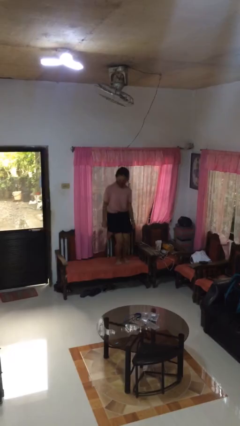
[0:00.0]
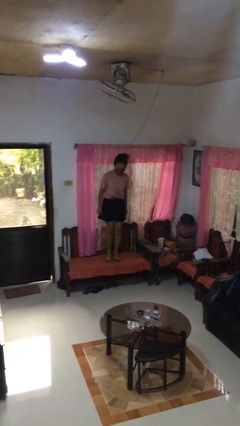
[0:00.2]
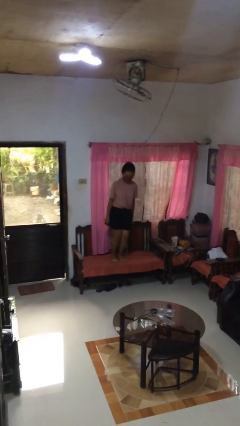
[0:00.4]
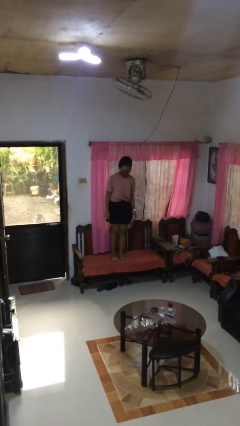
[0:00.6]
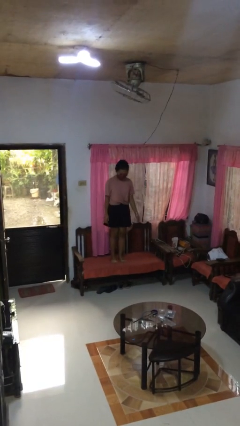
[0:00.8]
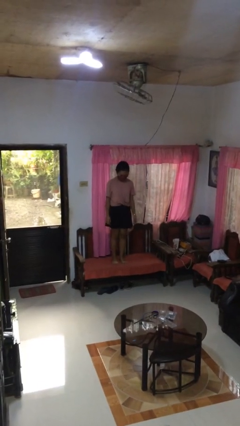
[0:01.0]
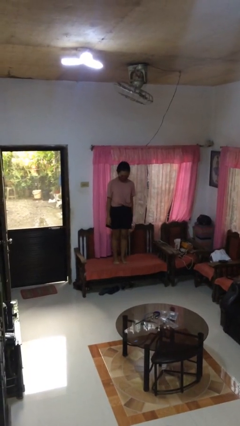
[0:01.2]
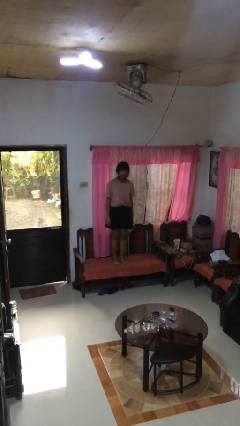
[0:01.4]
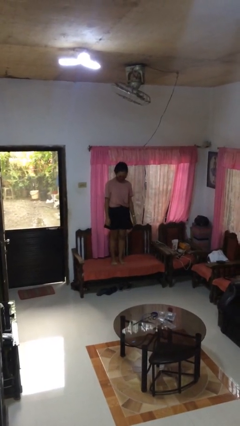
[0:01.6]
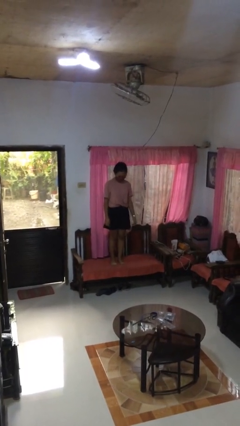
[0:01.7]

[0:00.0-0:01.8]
person jumps on couch

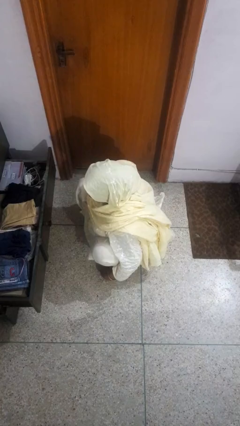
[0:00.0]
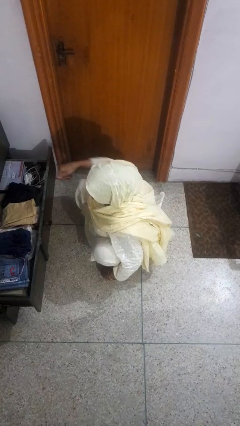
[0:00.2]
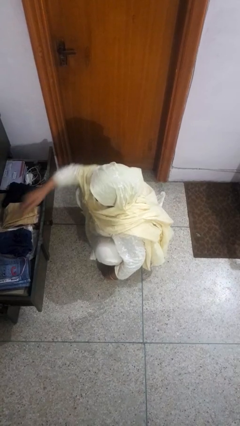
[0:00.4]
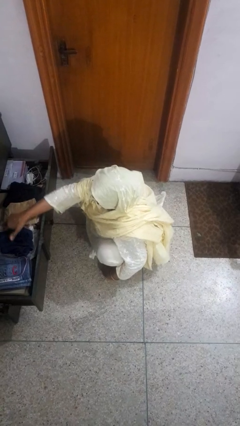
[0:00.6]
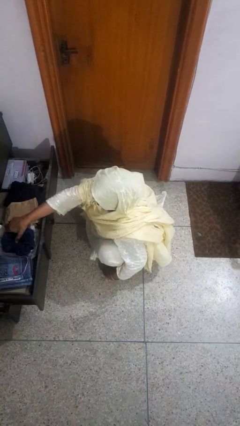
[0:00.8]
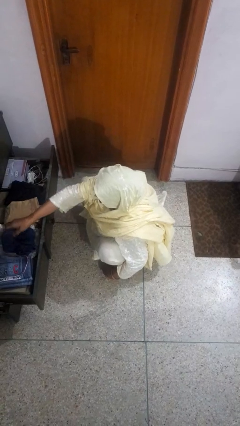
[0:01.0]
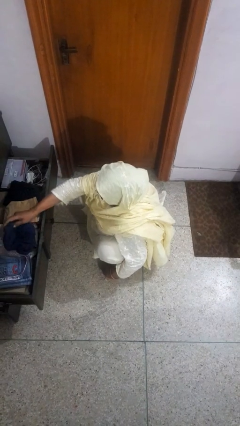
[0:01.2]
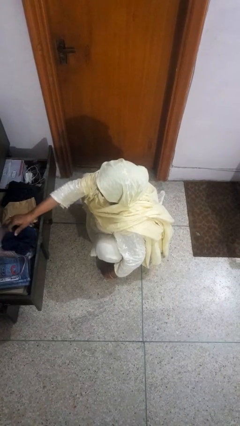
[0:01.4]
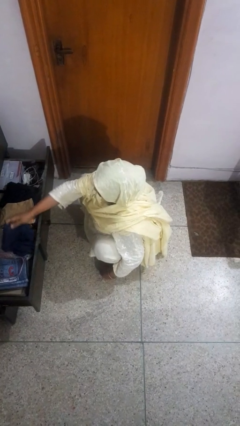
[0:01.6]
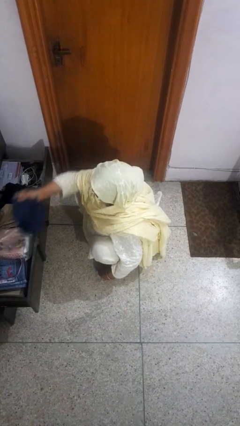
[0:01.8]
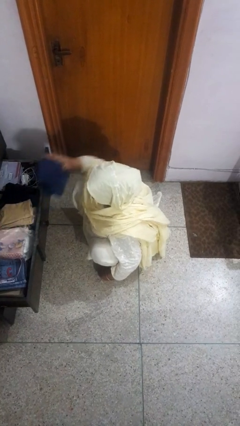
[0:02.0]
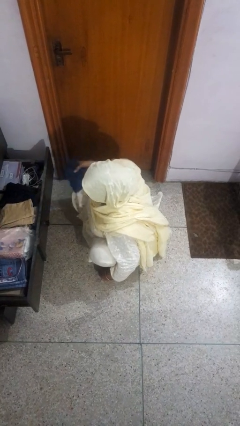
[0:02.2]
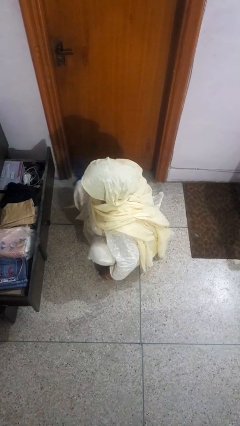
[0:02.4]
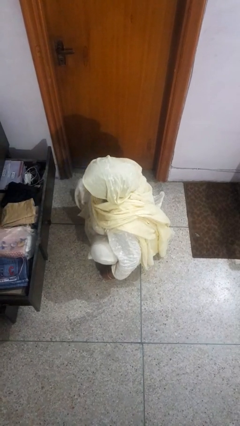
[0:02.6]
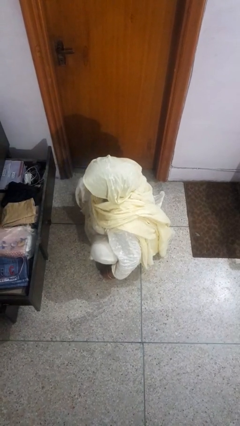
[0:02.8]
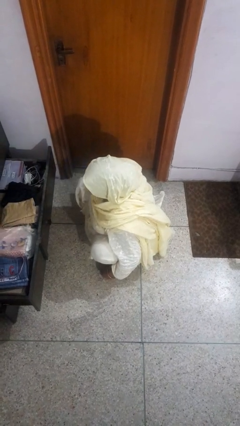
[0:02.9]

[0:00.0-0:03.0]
person takes clothes from dresser

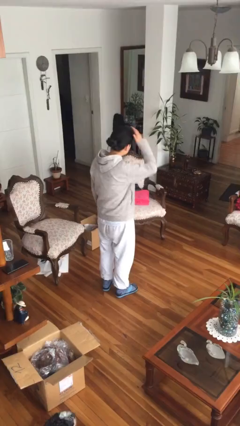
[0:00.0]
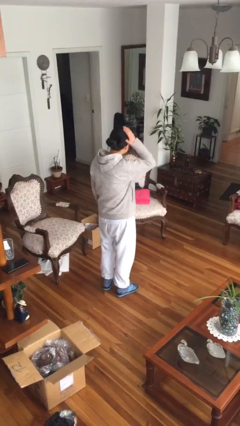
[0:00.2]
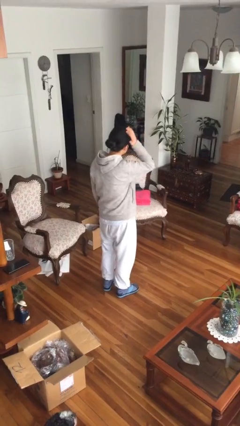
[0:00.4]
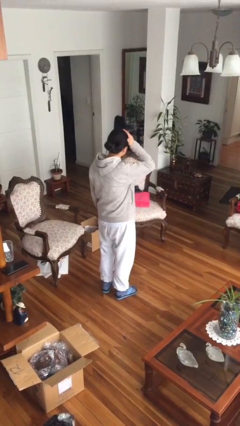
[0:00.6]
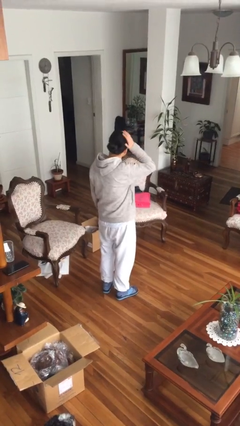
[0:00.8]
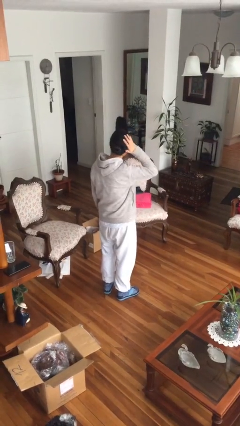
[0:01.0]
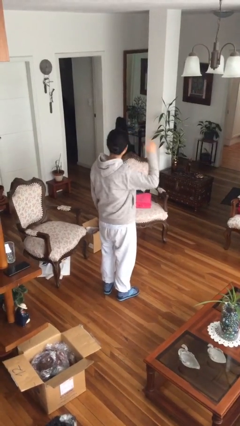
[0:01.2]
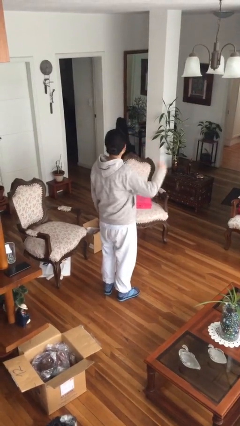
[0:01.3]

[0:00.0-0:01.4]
person pats head

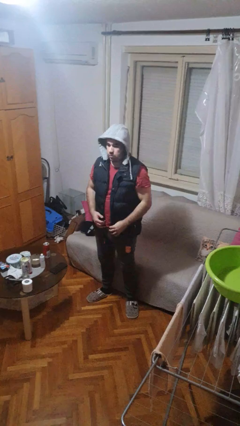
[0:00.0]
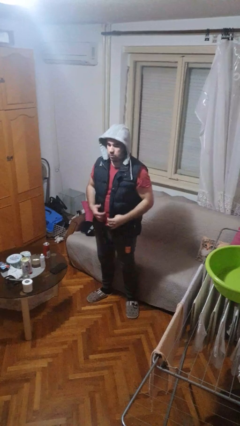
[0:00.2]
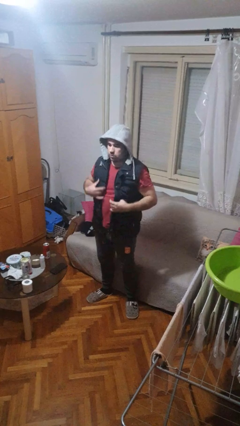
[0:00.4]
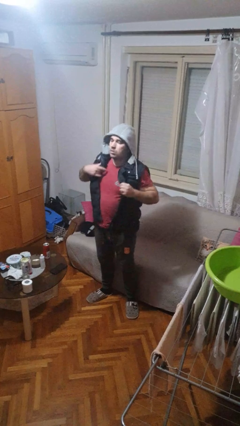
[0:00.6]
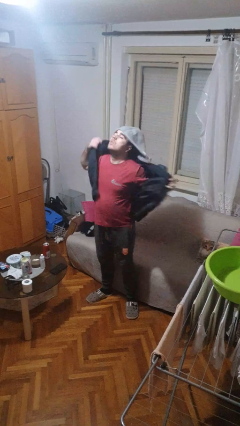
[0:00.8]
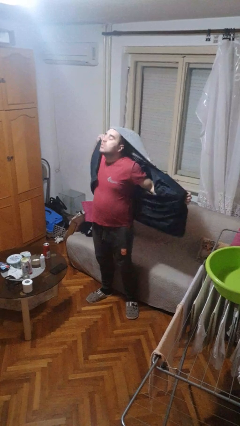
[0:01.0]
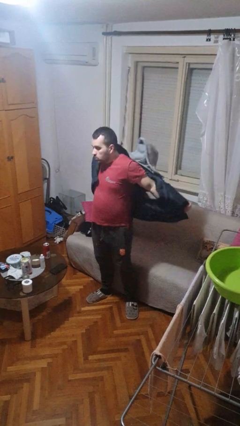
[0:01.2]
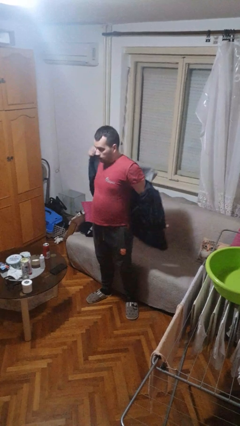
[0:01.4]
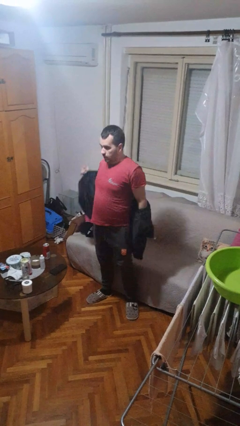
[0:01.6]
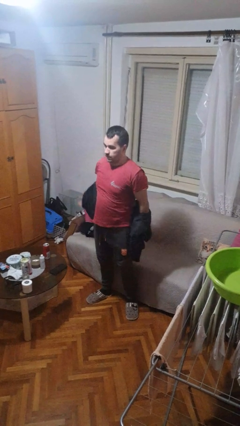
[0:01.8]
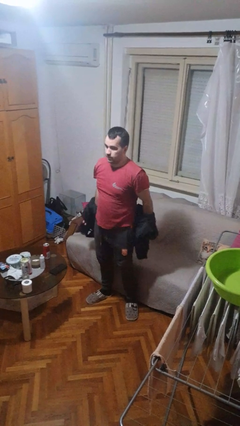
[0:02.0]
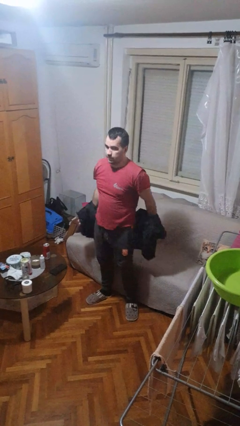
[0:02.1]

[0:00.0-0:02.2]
person takes off jacket

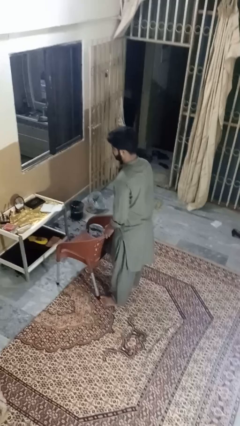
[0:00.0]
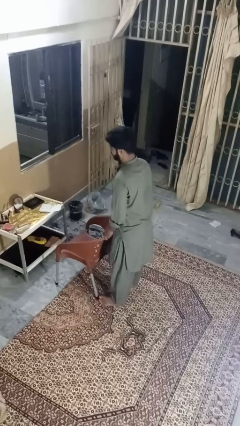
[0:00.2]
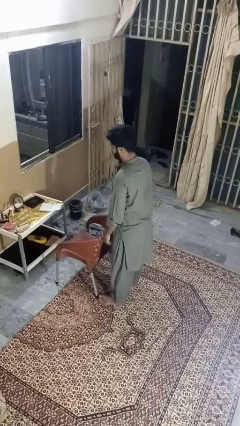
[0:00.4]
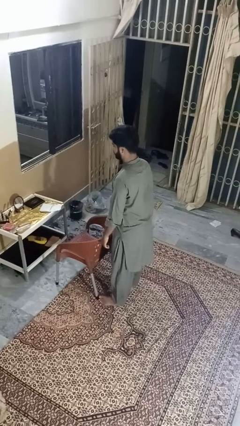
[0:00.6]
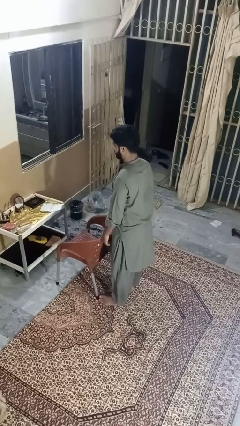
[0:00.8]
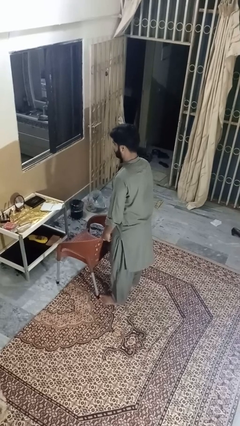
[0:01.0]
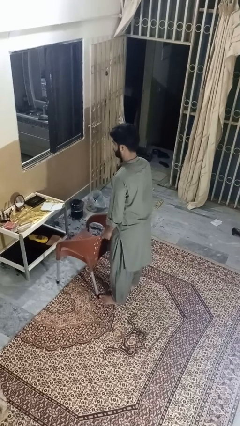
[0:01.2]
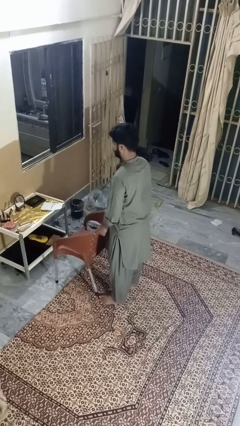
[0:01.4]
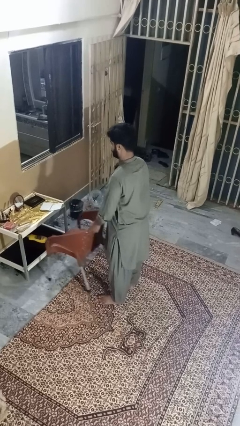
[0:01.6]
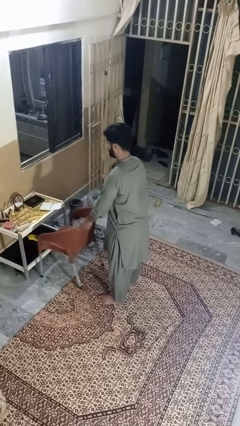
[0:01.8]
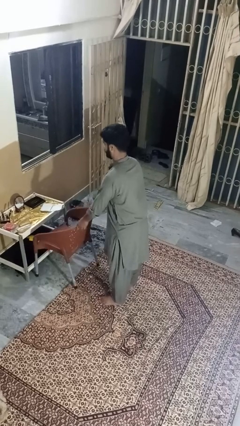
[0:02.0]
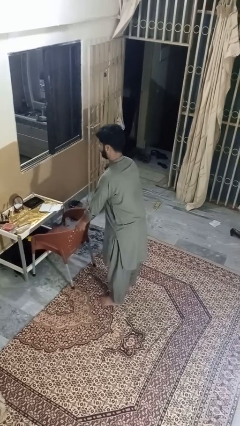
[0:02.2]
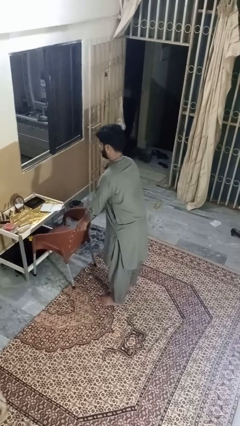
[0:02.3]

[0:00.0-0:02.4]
person pushes in chair

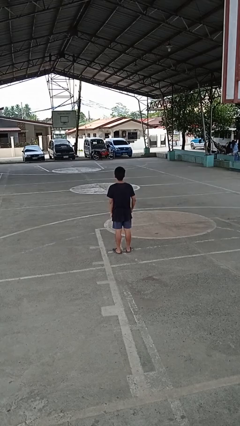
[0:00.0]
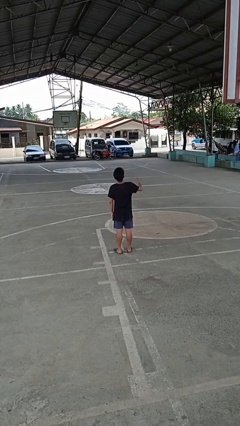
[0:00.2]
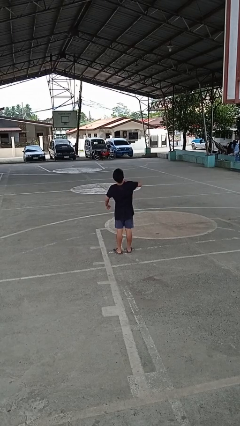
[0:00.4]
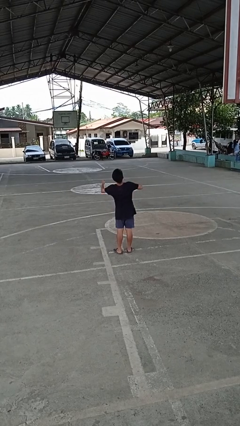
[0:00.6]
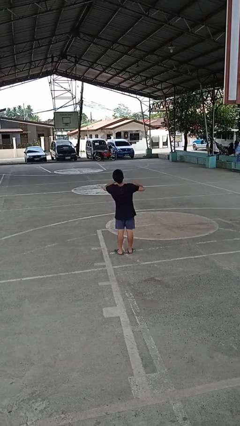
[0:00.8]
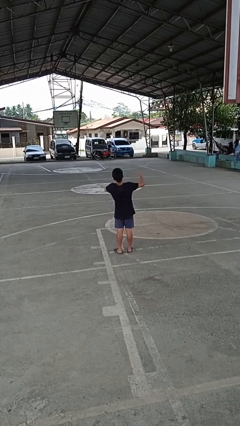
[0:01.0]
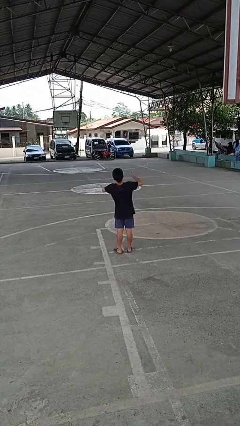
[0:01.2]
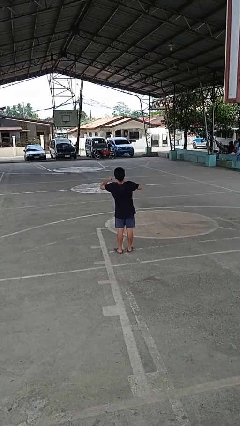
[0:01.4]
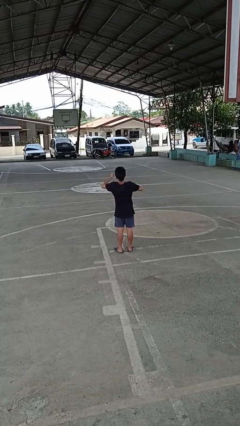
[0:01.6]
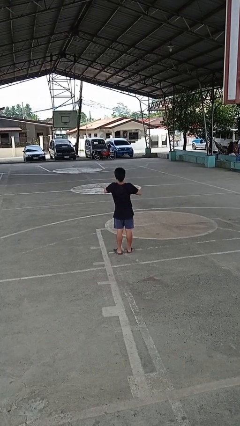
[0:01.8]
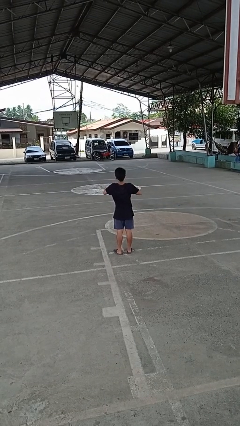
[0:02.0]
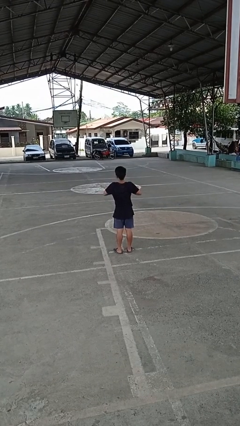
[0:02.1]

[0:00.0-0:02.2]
person drums on chest

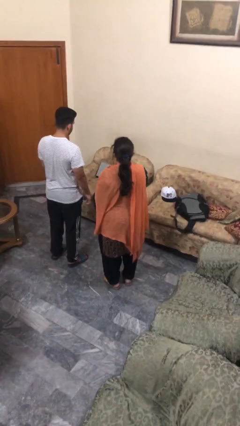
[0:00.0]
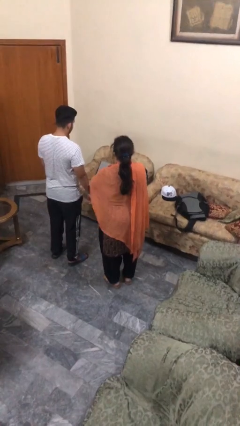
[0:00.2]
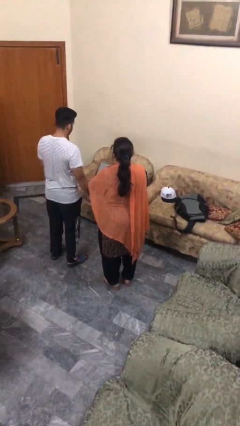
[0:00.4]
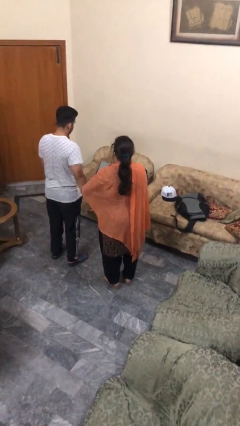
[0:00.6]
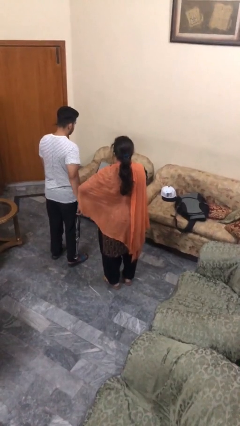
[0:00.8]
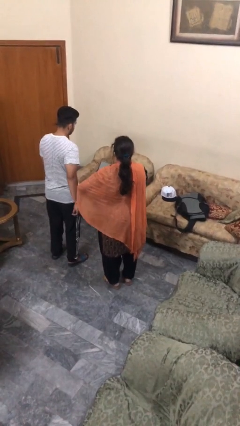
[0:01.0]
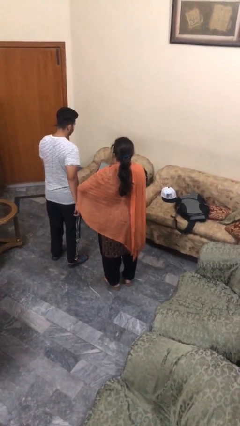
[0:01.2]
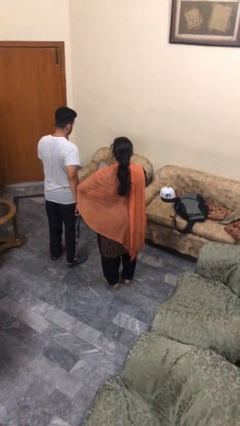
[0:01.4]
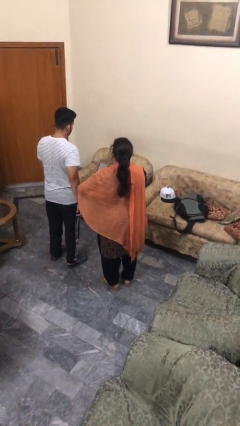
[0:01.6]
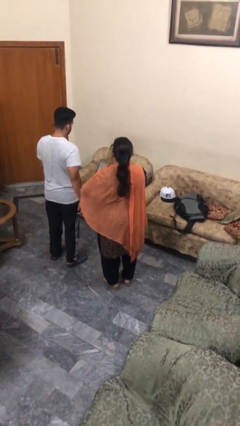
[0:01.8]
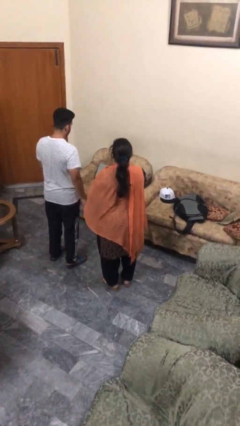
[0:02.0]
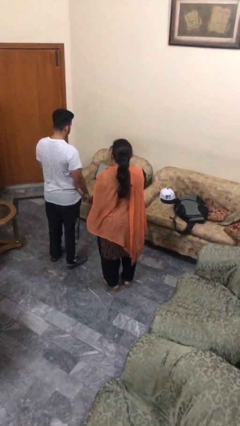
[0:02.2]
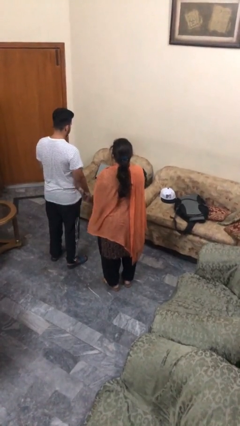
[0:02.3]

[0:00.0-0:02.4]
person grabs person by forearm

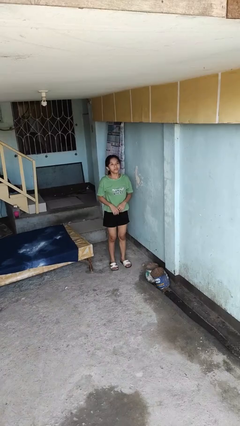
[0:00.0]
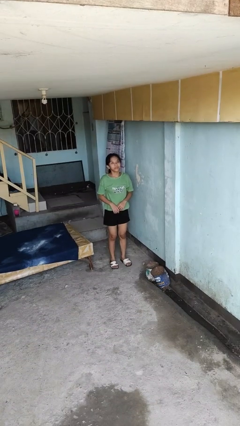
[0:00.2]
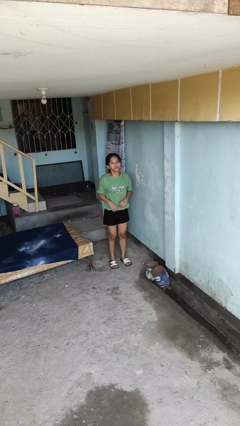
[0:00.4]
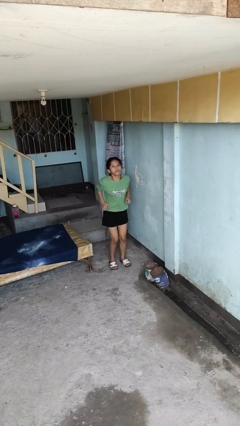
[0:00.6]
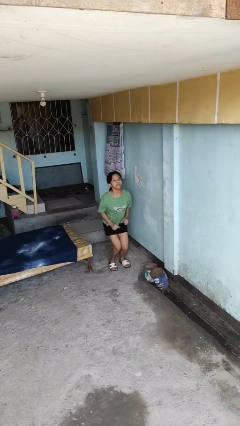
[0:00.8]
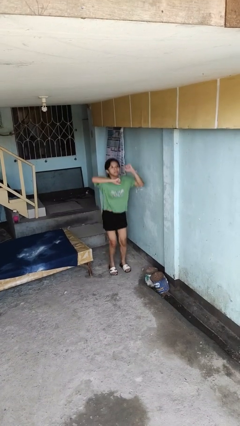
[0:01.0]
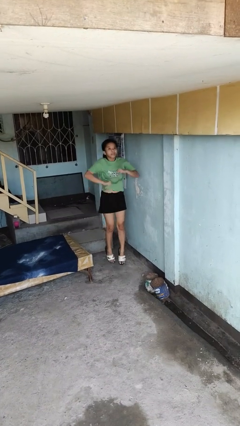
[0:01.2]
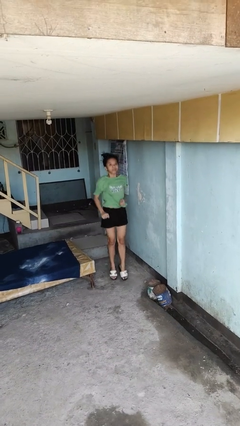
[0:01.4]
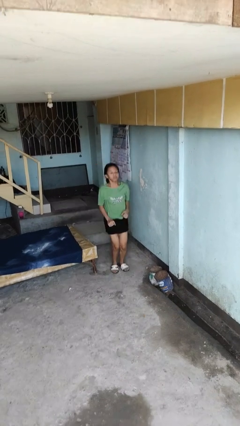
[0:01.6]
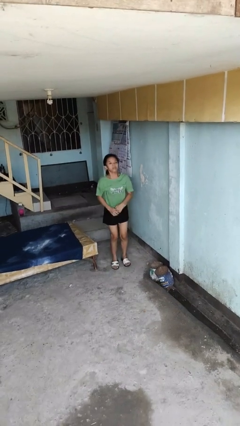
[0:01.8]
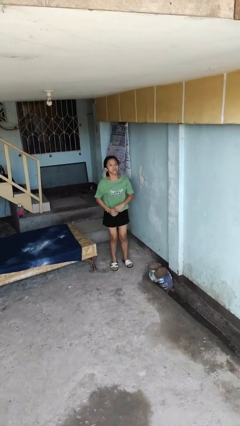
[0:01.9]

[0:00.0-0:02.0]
person jumps
